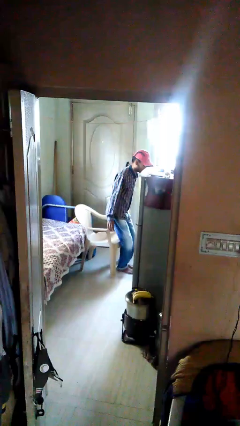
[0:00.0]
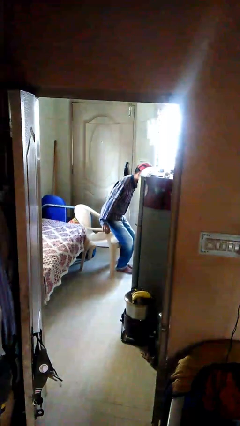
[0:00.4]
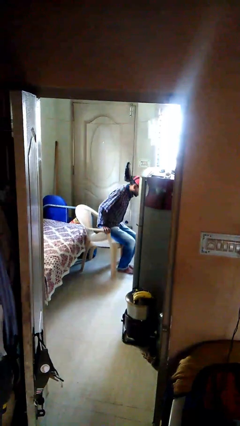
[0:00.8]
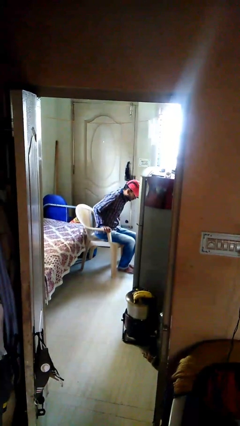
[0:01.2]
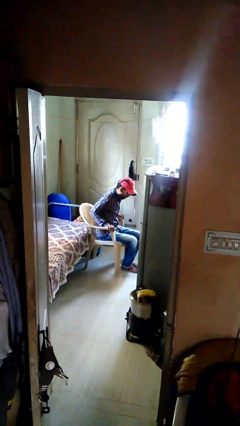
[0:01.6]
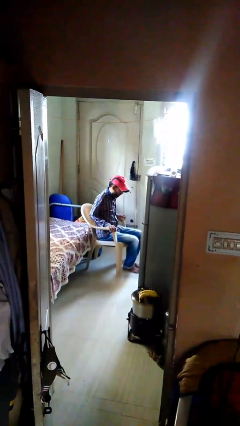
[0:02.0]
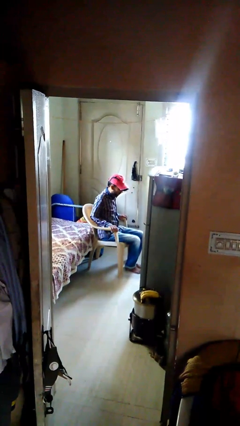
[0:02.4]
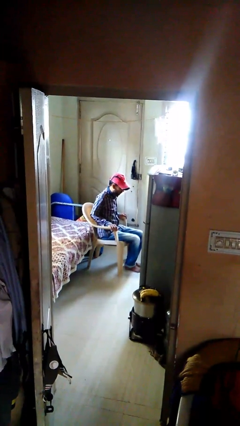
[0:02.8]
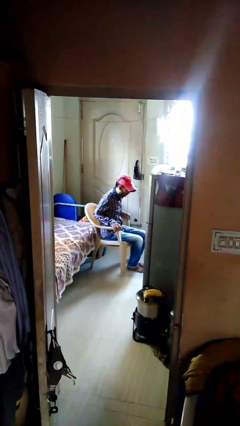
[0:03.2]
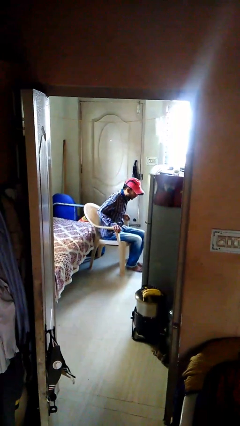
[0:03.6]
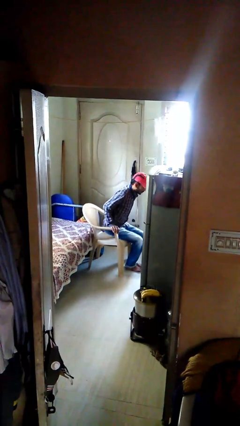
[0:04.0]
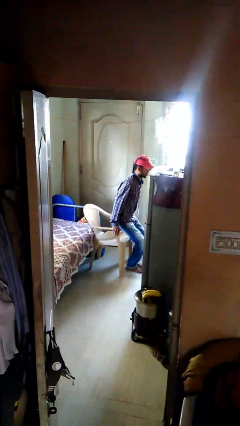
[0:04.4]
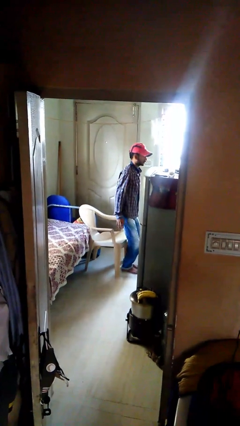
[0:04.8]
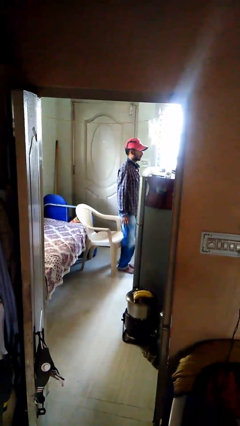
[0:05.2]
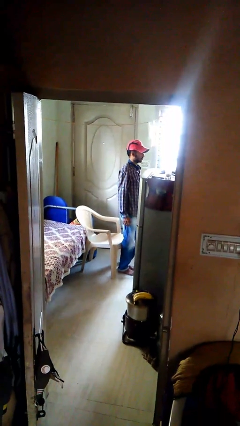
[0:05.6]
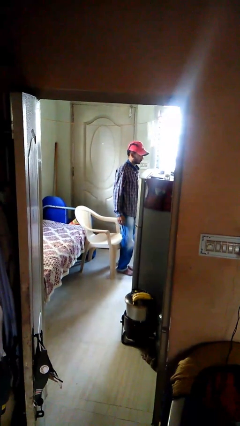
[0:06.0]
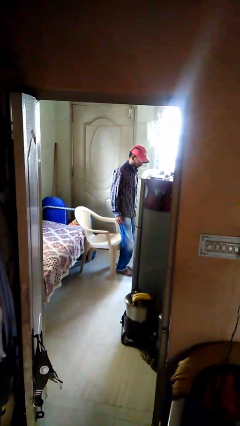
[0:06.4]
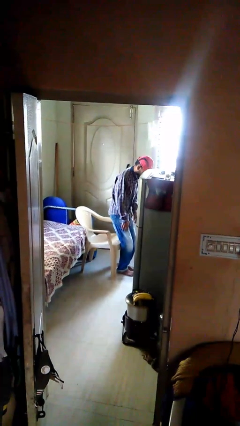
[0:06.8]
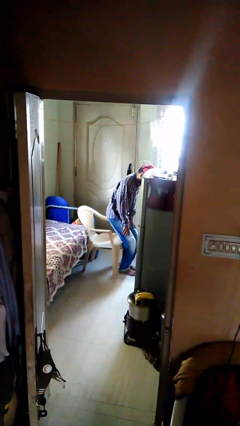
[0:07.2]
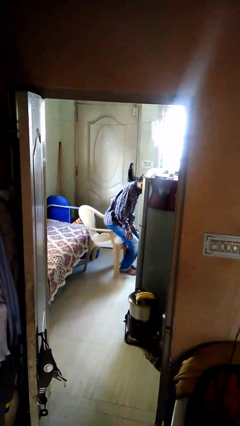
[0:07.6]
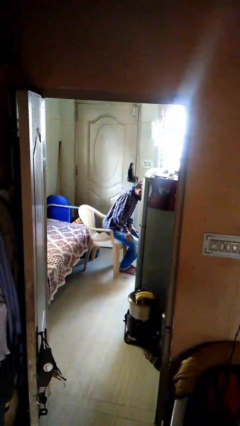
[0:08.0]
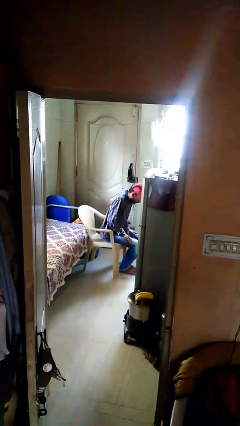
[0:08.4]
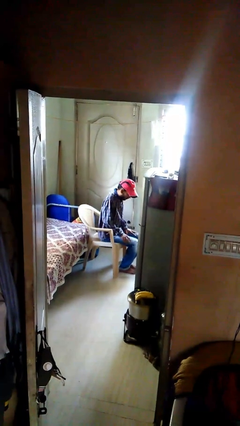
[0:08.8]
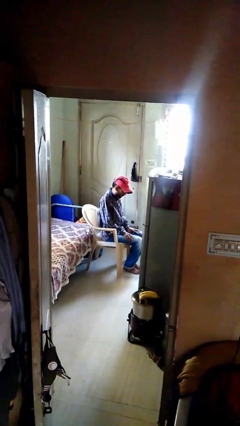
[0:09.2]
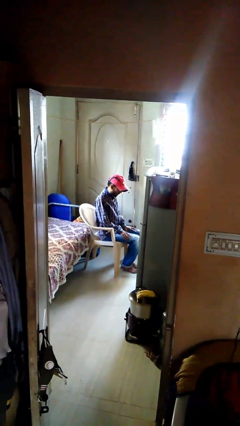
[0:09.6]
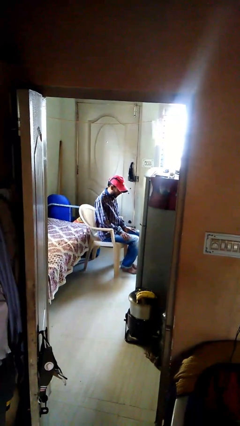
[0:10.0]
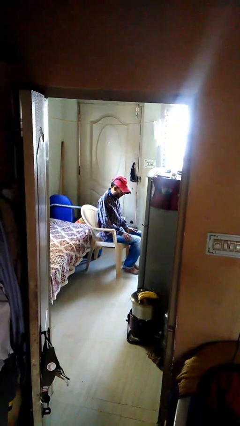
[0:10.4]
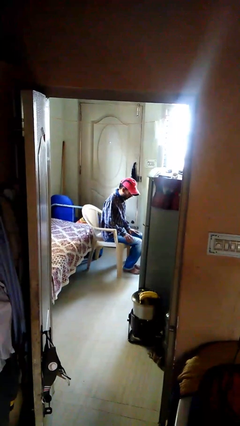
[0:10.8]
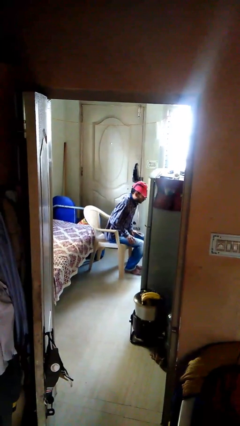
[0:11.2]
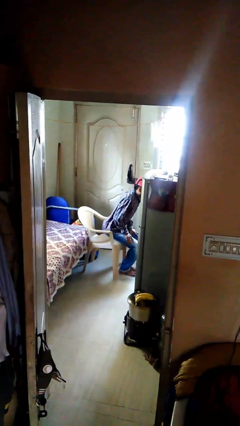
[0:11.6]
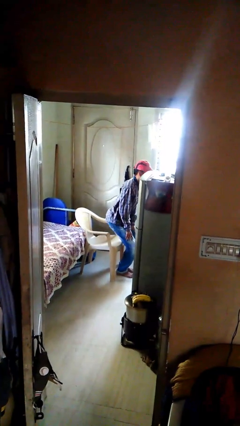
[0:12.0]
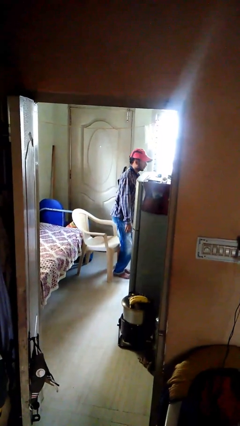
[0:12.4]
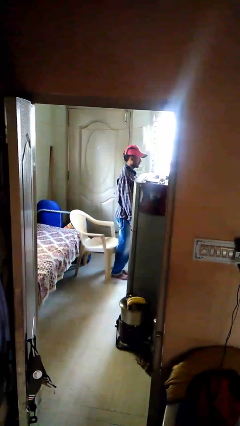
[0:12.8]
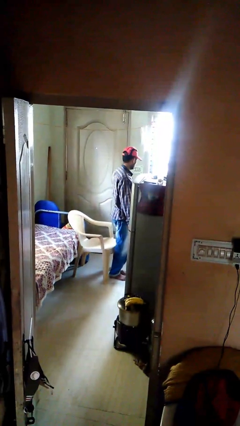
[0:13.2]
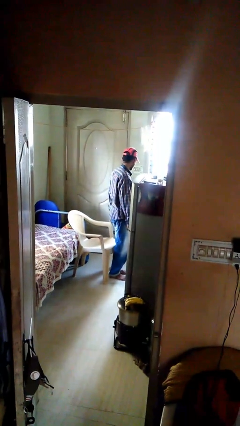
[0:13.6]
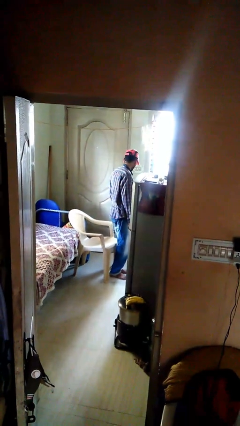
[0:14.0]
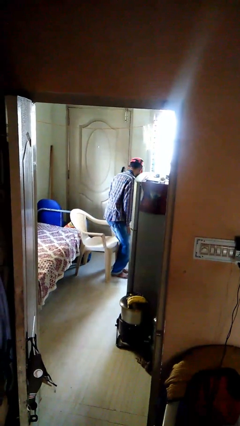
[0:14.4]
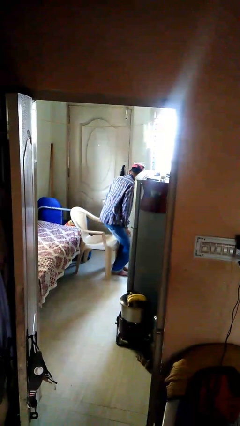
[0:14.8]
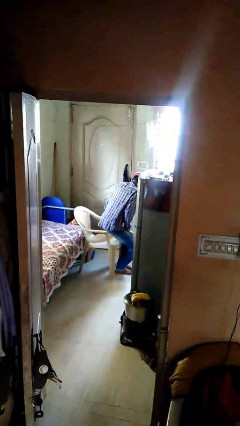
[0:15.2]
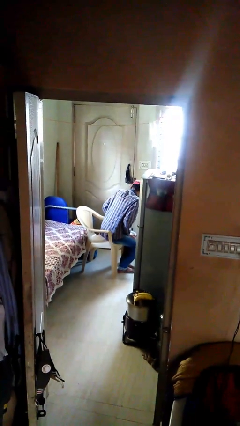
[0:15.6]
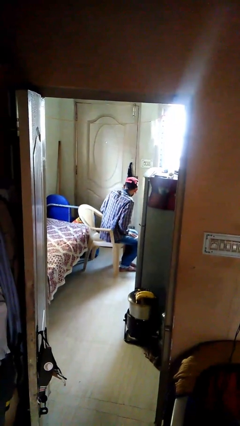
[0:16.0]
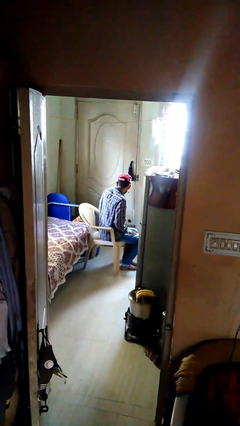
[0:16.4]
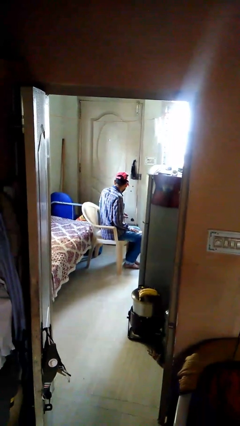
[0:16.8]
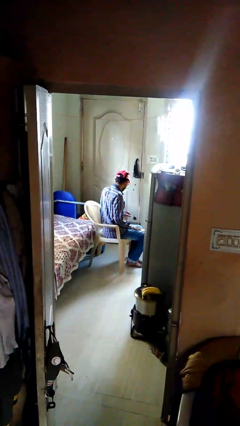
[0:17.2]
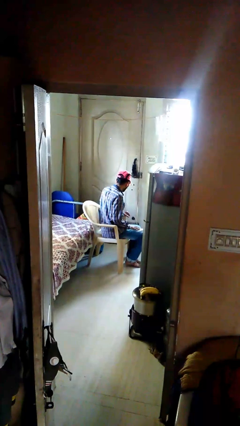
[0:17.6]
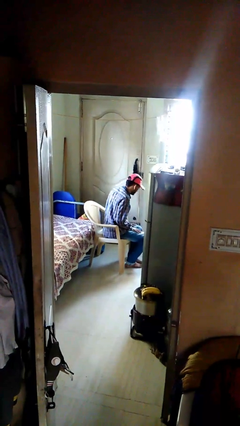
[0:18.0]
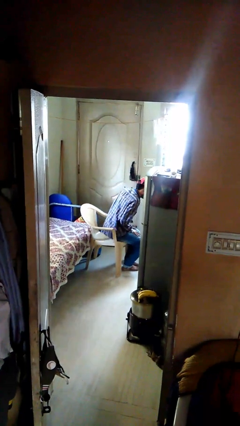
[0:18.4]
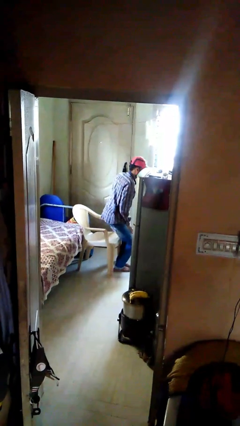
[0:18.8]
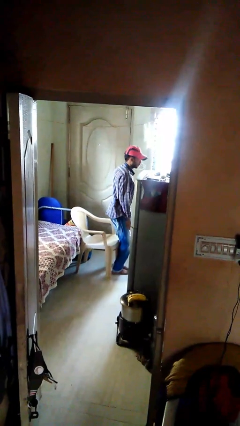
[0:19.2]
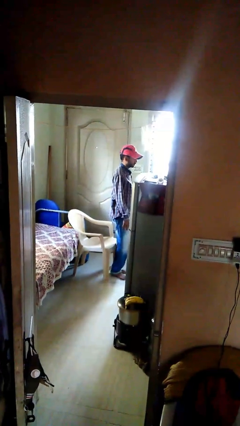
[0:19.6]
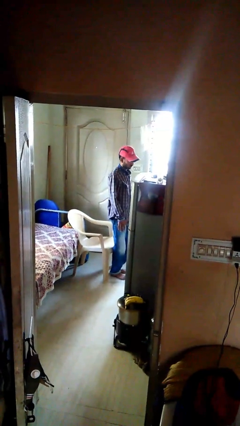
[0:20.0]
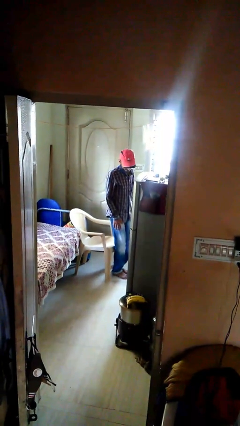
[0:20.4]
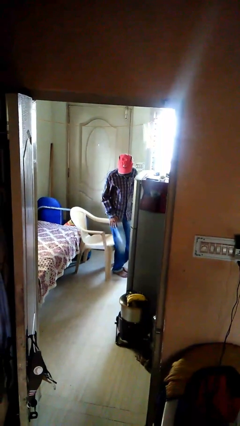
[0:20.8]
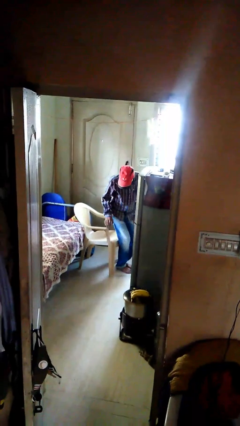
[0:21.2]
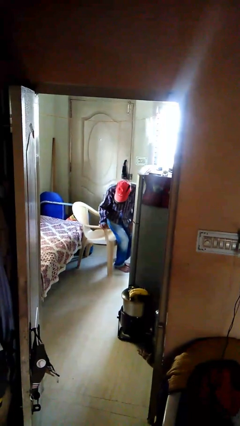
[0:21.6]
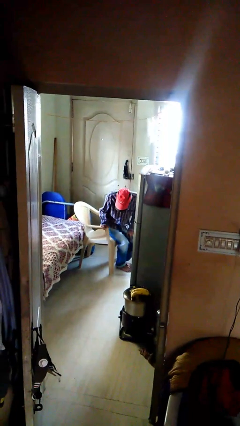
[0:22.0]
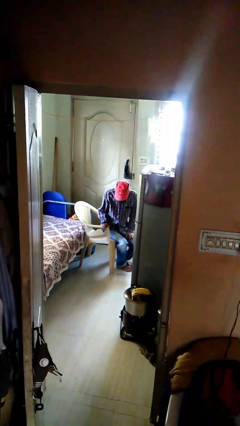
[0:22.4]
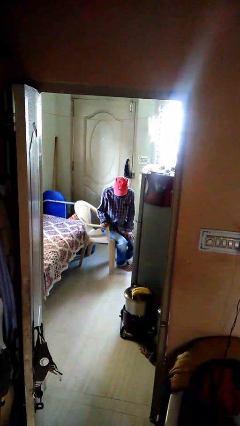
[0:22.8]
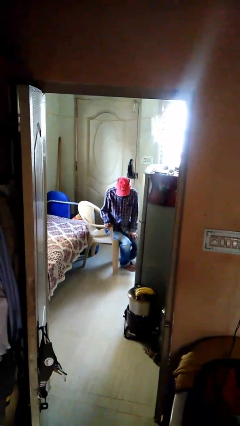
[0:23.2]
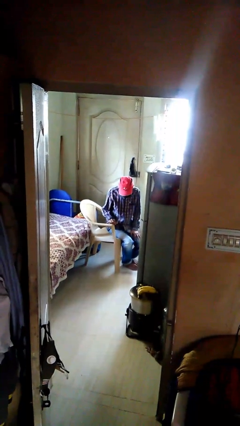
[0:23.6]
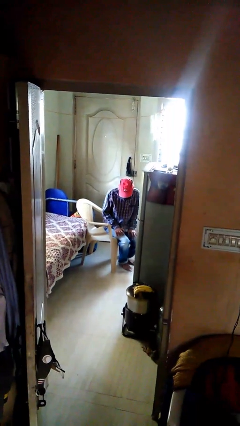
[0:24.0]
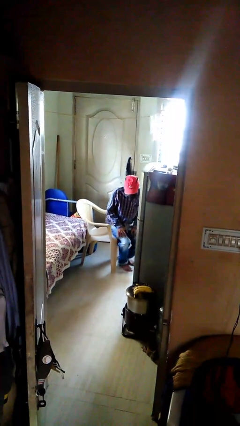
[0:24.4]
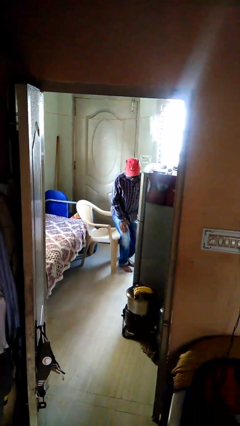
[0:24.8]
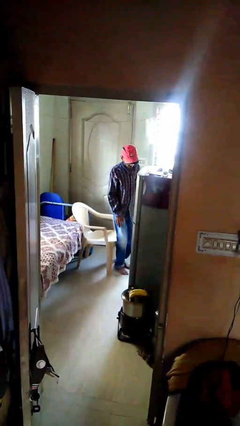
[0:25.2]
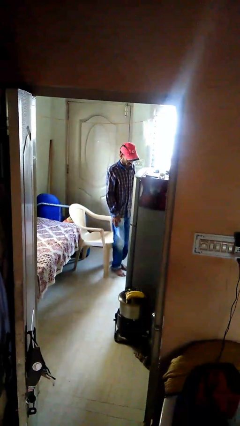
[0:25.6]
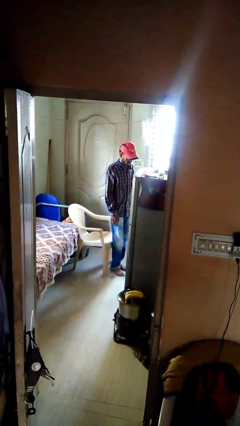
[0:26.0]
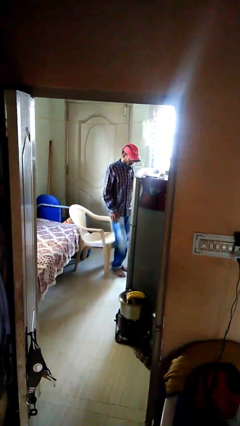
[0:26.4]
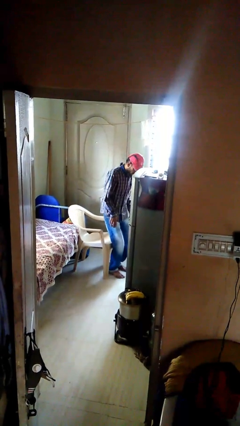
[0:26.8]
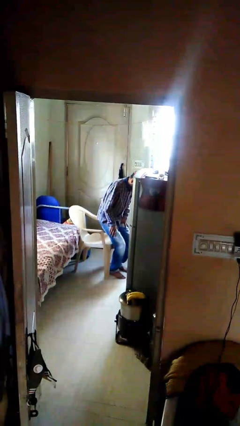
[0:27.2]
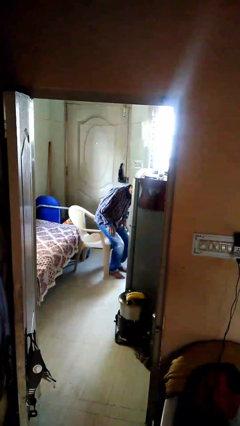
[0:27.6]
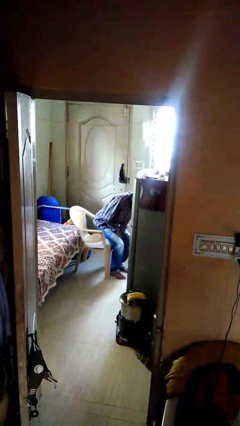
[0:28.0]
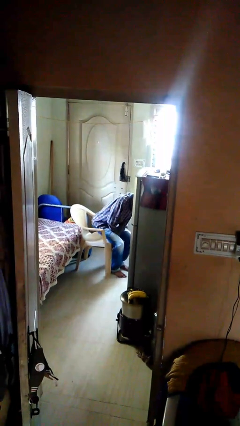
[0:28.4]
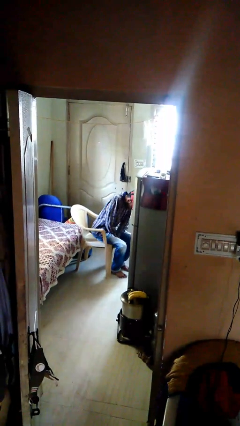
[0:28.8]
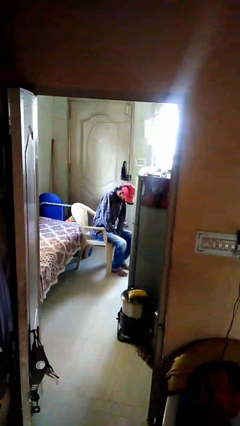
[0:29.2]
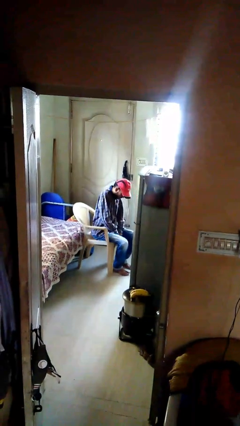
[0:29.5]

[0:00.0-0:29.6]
person sits down

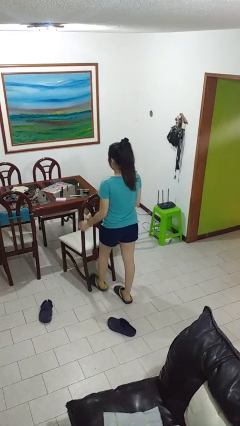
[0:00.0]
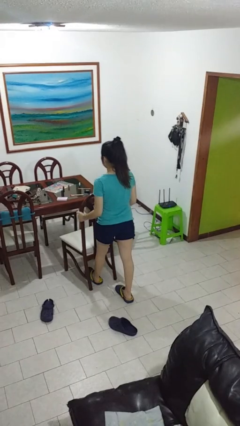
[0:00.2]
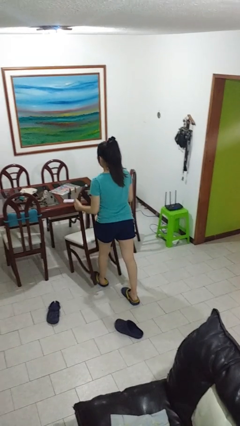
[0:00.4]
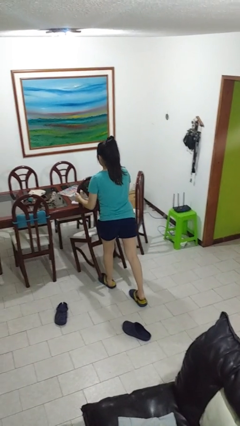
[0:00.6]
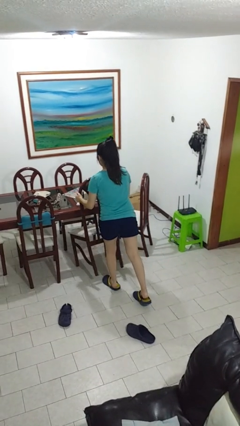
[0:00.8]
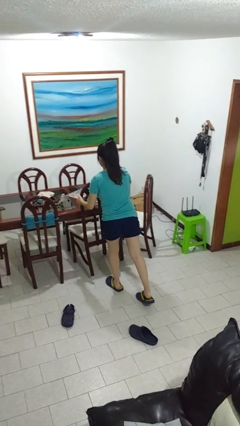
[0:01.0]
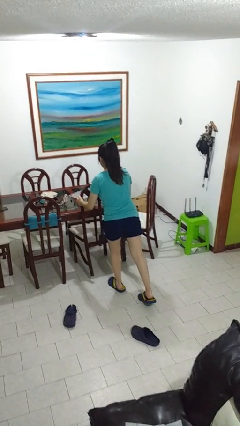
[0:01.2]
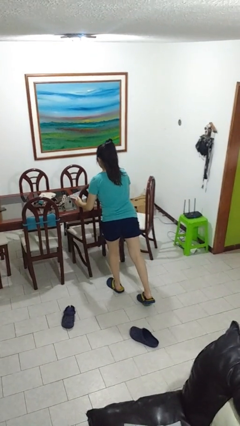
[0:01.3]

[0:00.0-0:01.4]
person pushes in chair

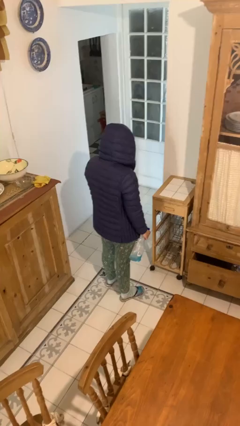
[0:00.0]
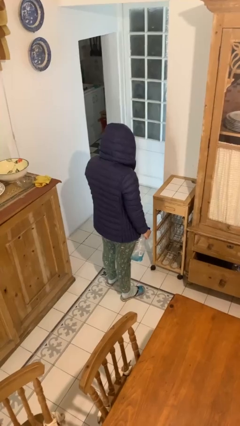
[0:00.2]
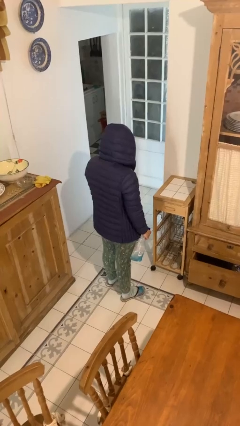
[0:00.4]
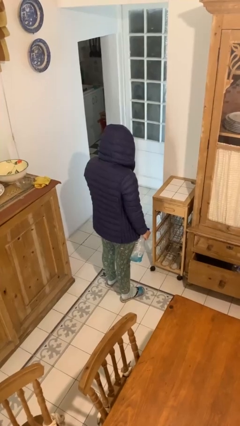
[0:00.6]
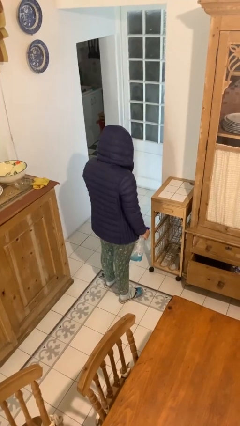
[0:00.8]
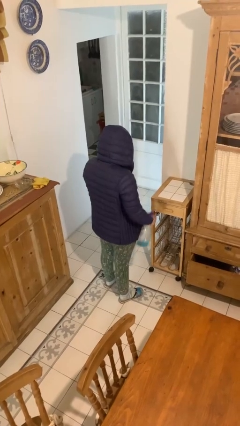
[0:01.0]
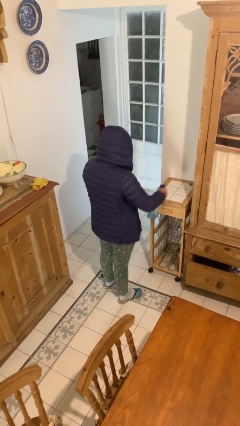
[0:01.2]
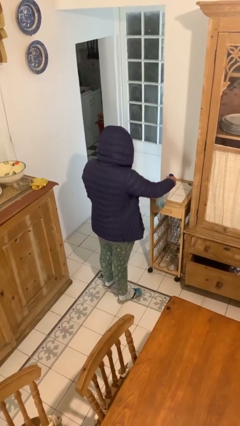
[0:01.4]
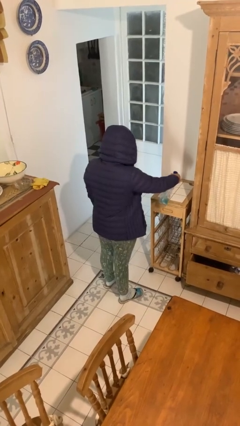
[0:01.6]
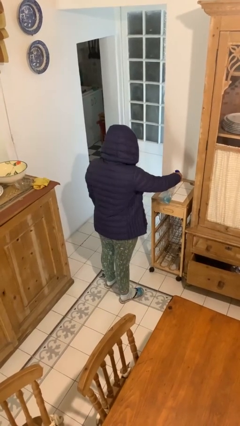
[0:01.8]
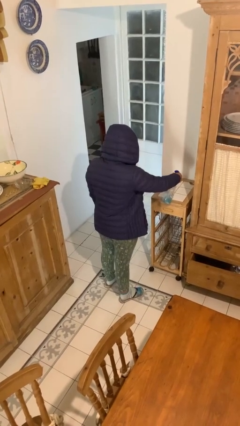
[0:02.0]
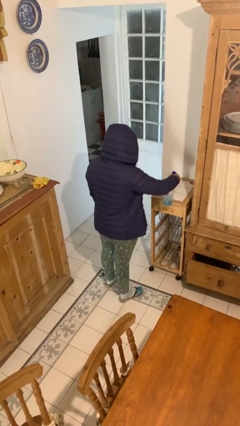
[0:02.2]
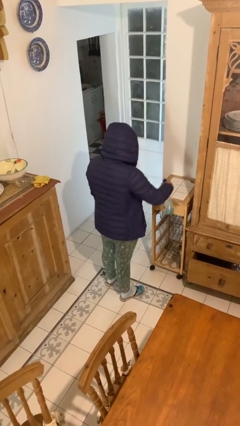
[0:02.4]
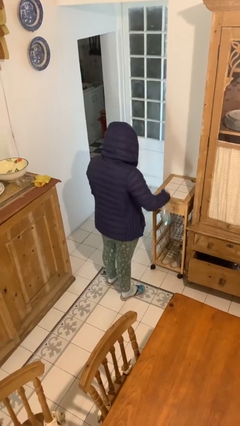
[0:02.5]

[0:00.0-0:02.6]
person sprays from bottle
